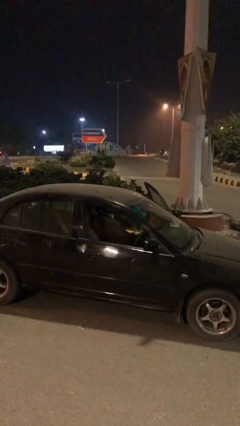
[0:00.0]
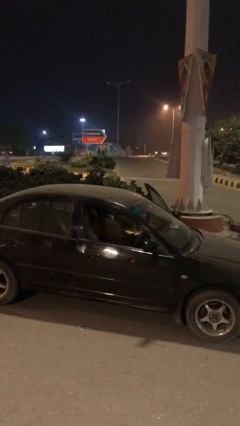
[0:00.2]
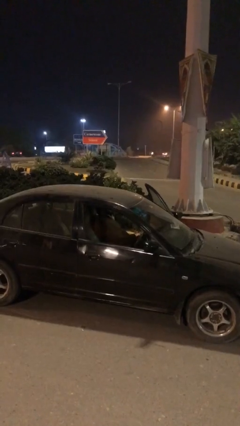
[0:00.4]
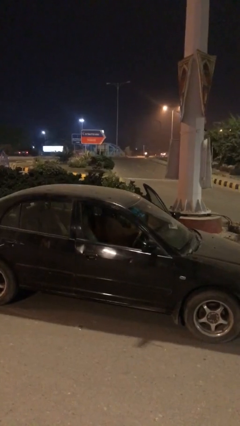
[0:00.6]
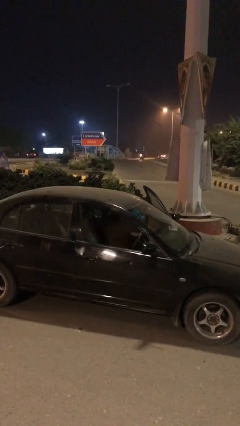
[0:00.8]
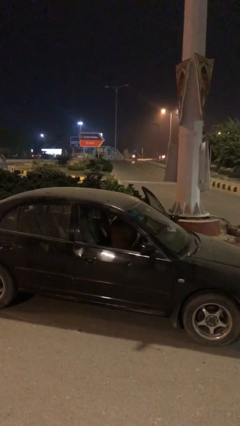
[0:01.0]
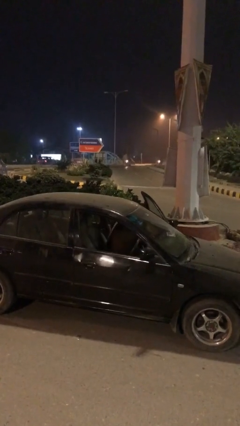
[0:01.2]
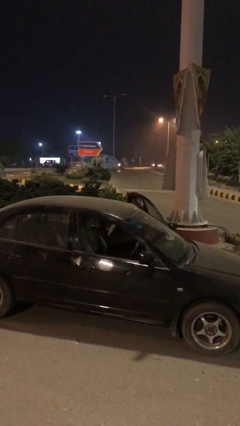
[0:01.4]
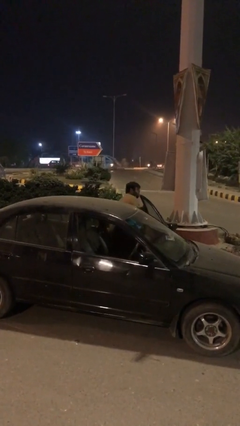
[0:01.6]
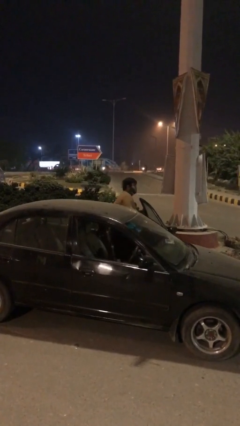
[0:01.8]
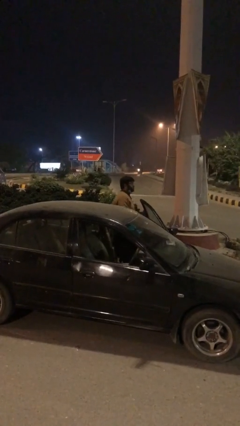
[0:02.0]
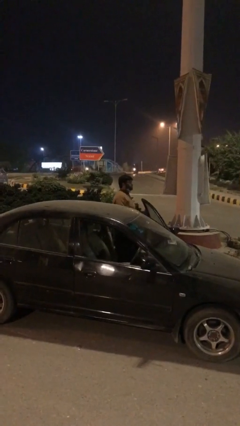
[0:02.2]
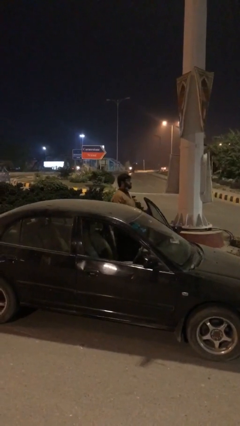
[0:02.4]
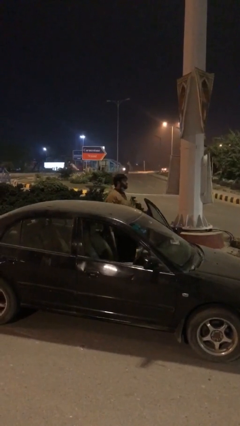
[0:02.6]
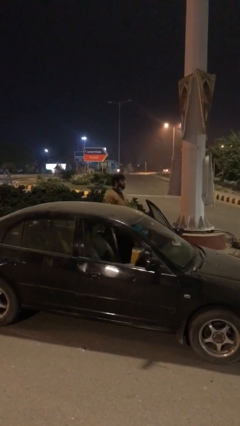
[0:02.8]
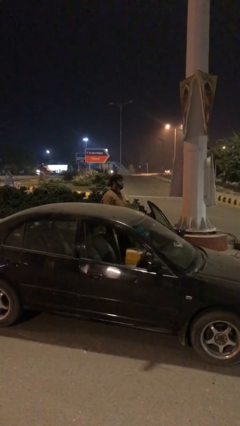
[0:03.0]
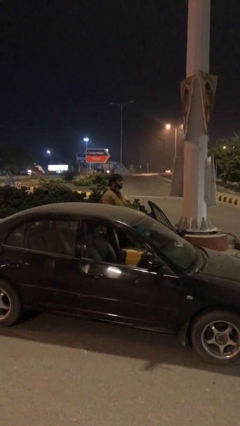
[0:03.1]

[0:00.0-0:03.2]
person exits car

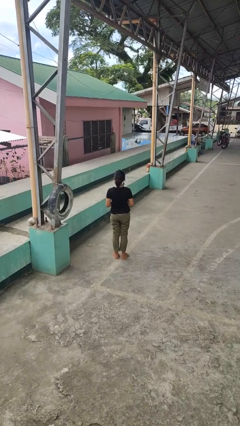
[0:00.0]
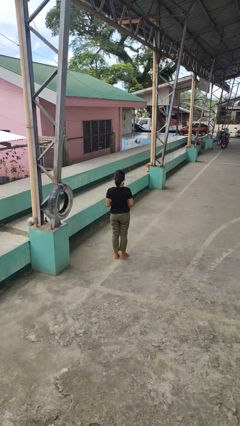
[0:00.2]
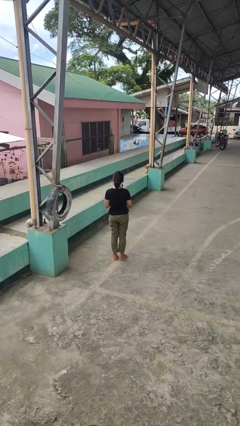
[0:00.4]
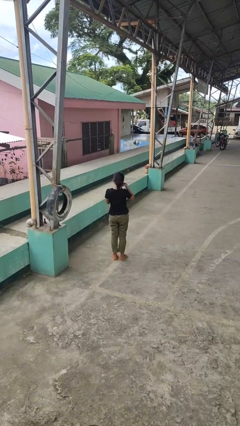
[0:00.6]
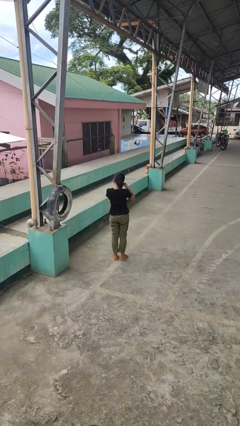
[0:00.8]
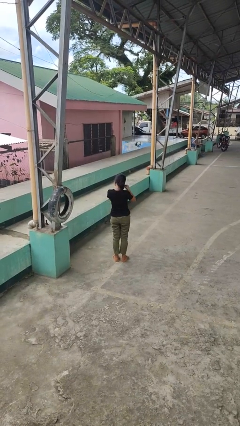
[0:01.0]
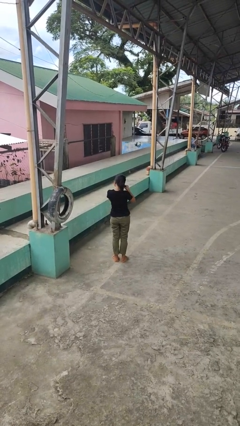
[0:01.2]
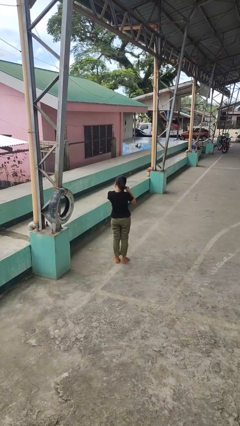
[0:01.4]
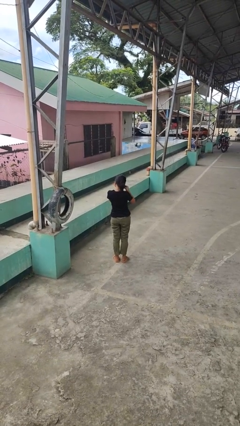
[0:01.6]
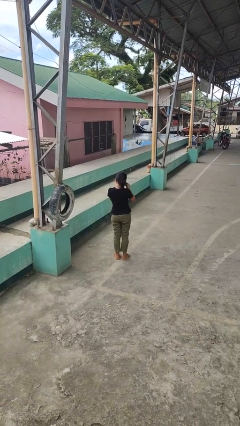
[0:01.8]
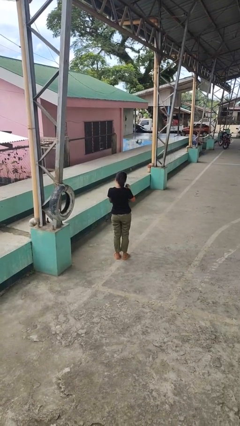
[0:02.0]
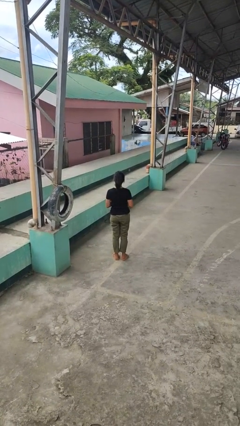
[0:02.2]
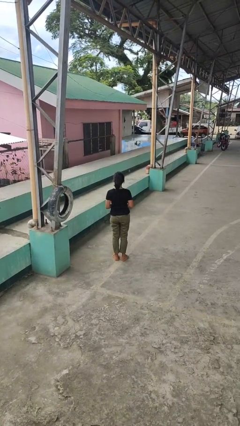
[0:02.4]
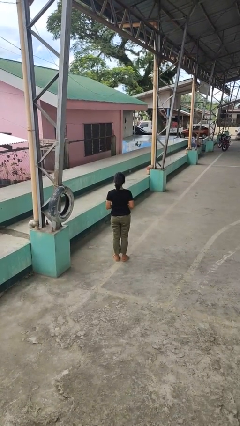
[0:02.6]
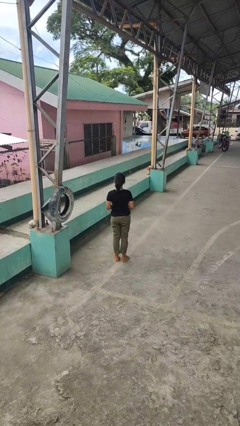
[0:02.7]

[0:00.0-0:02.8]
person takes off earrings

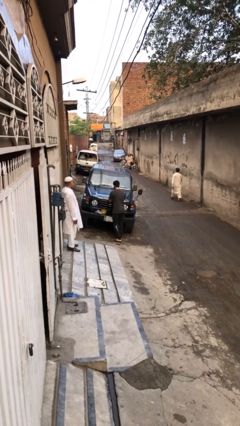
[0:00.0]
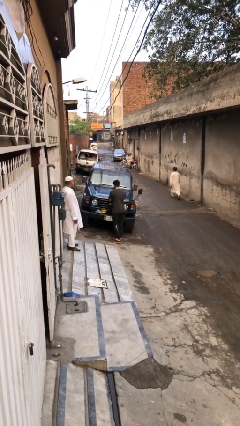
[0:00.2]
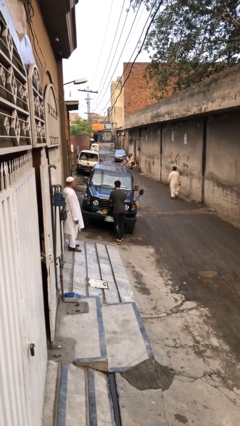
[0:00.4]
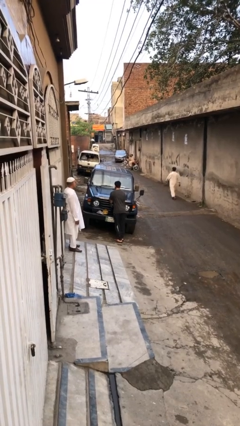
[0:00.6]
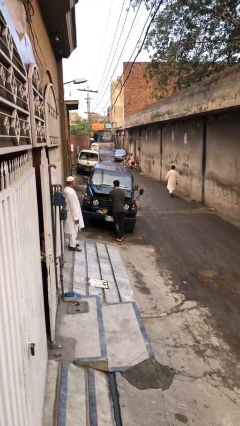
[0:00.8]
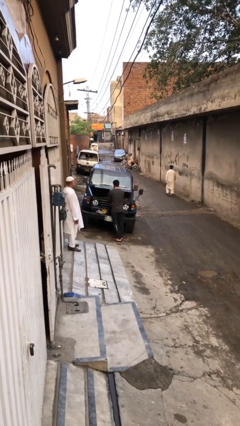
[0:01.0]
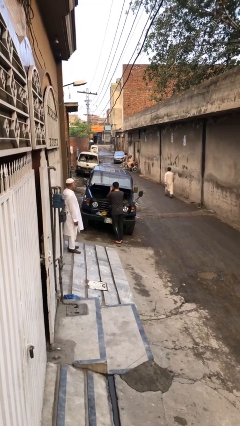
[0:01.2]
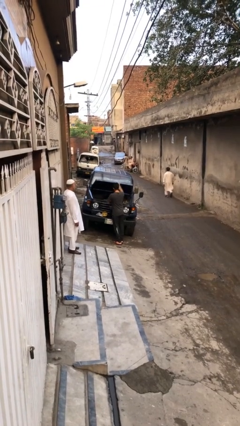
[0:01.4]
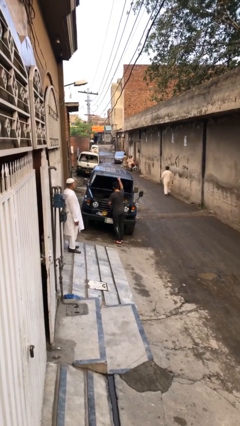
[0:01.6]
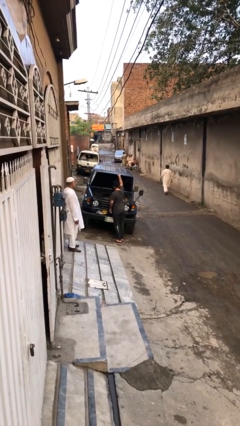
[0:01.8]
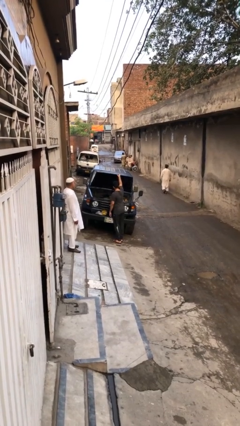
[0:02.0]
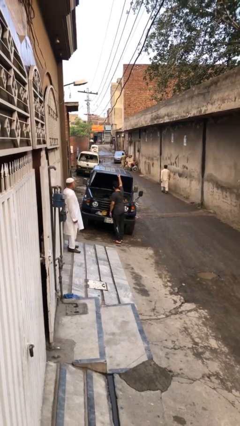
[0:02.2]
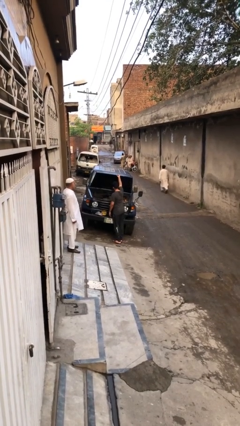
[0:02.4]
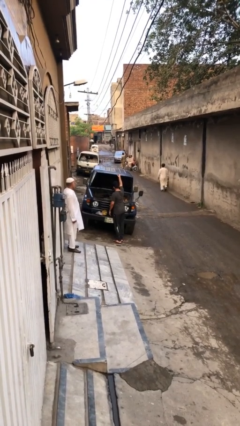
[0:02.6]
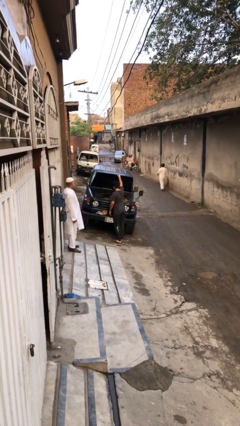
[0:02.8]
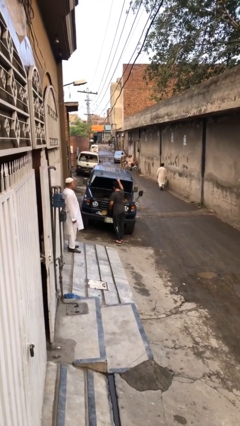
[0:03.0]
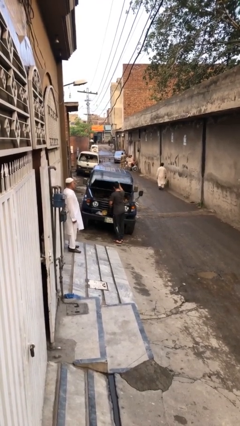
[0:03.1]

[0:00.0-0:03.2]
person opens car hood

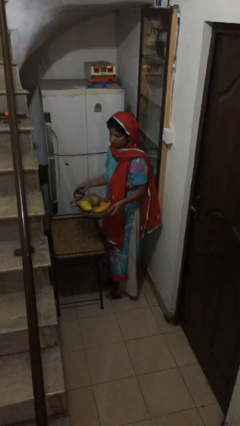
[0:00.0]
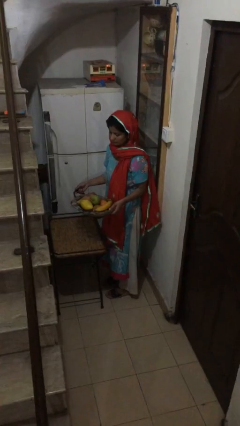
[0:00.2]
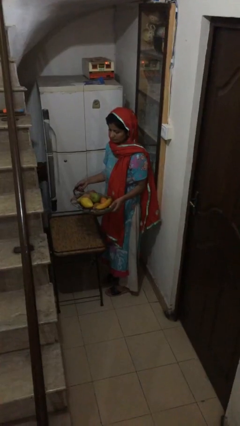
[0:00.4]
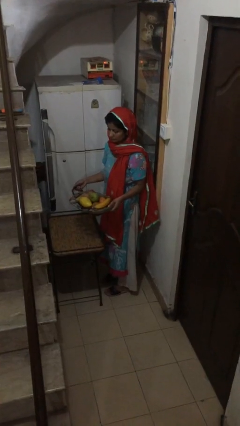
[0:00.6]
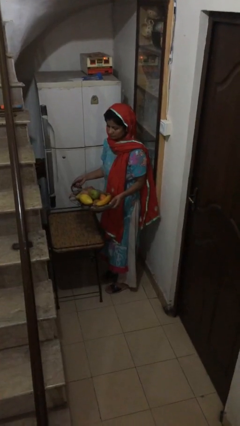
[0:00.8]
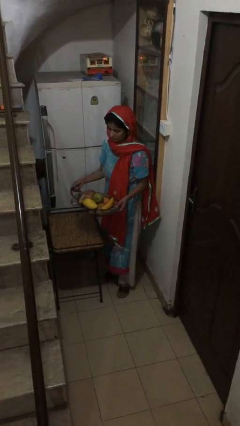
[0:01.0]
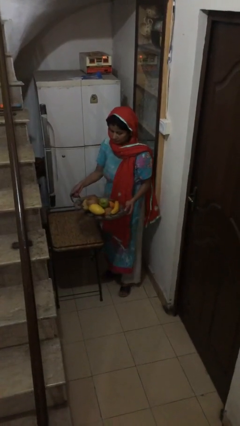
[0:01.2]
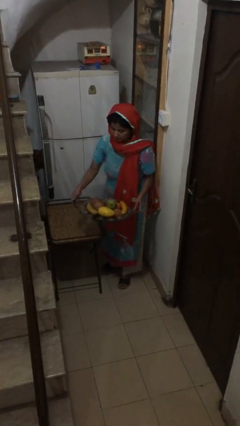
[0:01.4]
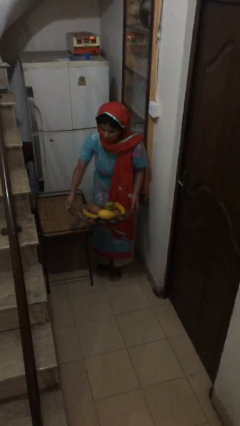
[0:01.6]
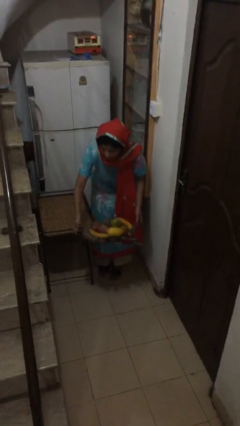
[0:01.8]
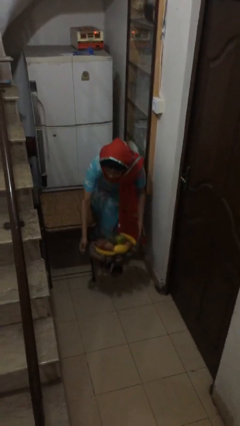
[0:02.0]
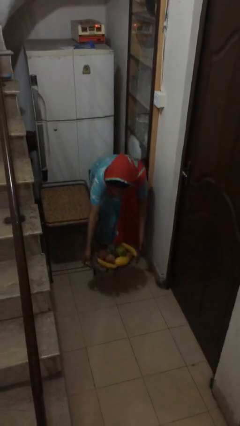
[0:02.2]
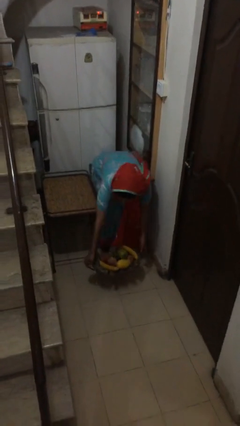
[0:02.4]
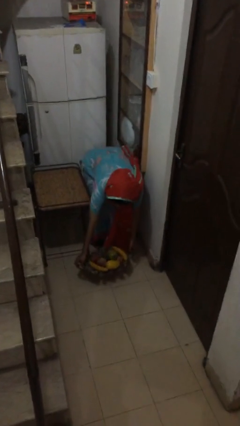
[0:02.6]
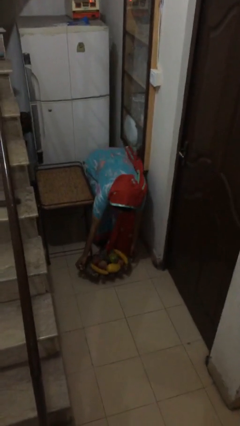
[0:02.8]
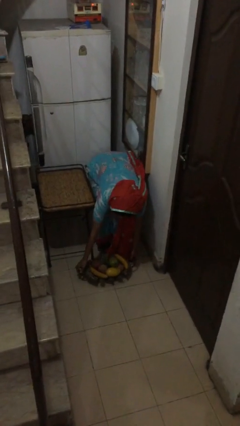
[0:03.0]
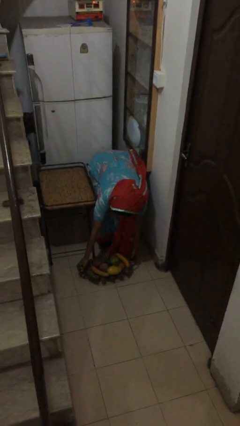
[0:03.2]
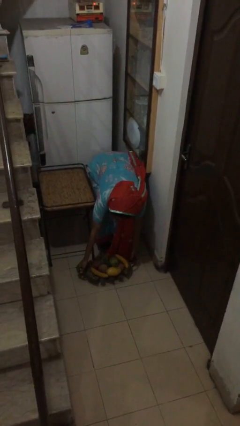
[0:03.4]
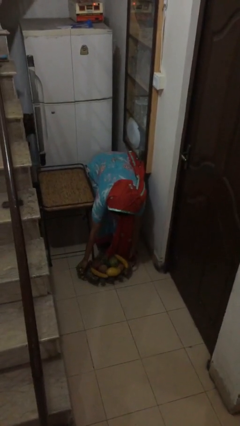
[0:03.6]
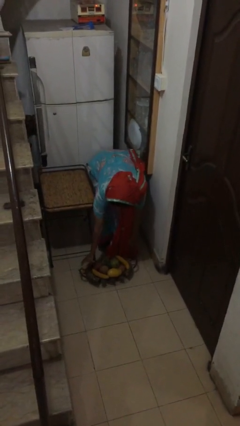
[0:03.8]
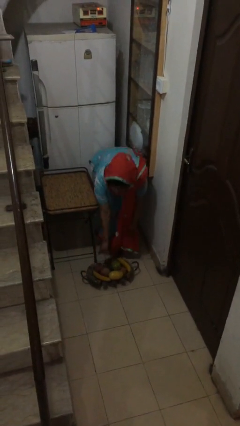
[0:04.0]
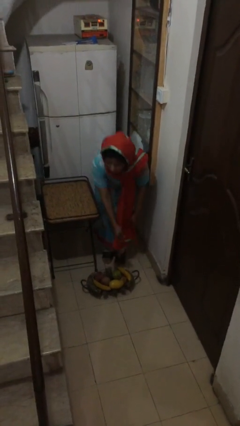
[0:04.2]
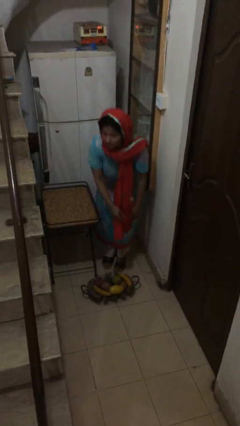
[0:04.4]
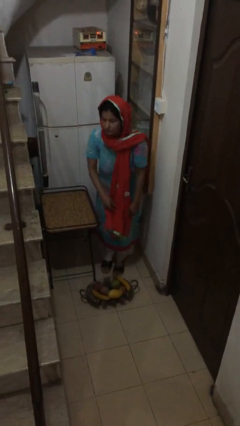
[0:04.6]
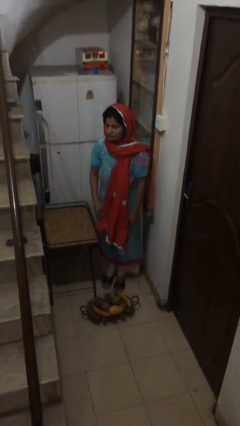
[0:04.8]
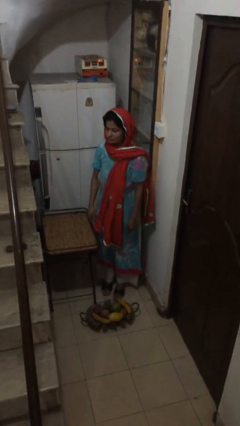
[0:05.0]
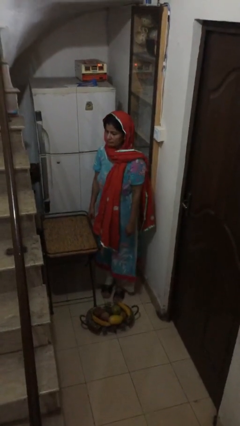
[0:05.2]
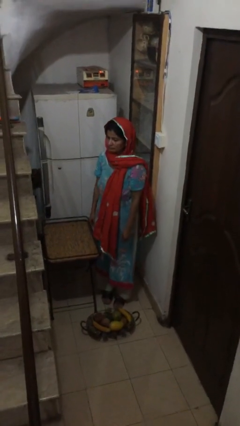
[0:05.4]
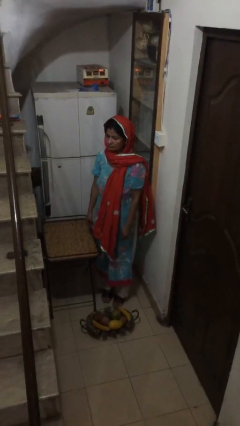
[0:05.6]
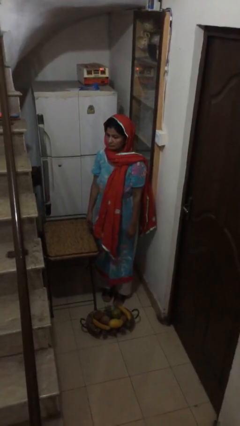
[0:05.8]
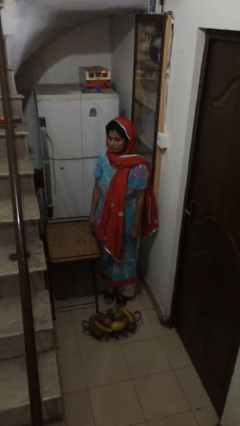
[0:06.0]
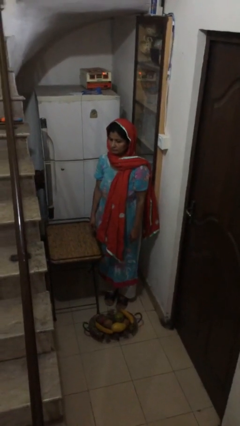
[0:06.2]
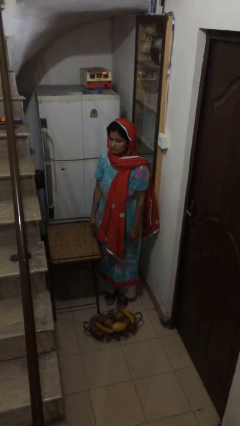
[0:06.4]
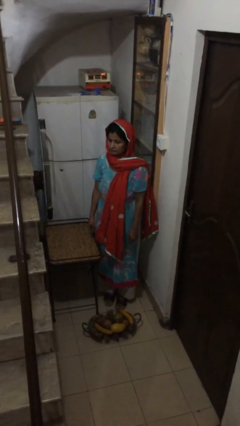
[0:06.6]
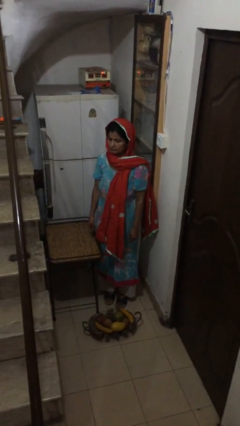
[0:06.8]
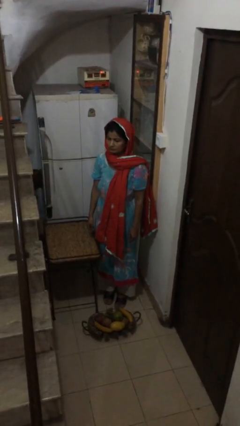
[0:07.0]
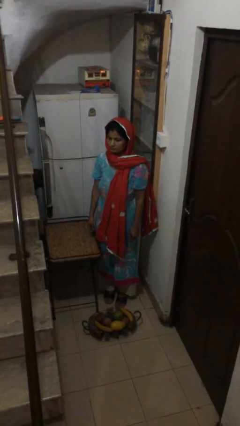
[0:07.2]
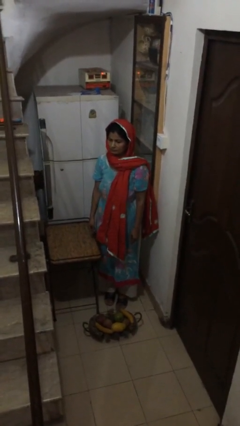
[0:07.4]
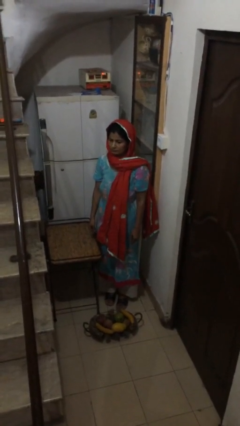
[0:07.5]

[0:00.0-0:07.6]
person puts down object on floor

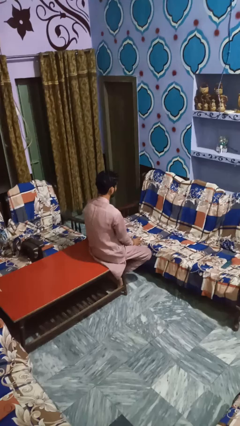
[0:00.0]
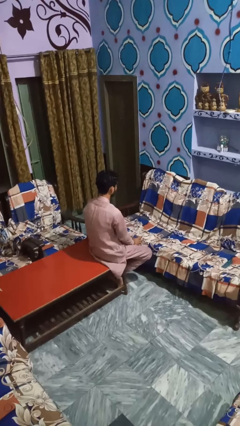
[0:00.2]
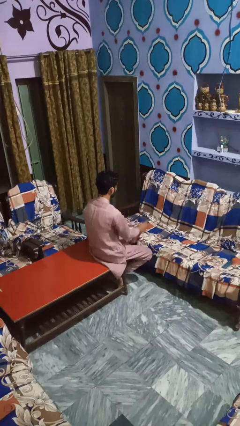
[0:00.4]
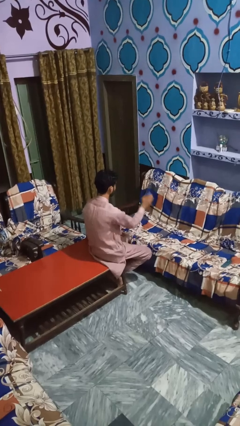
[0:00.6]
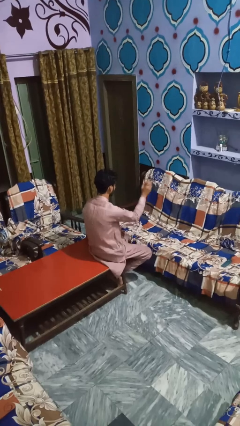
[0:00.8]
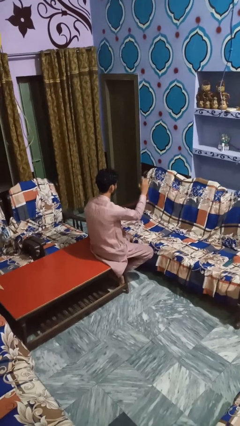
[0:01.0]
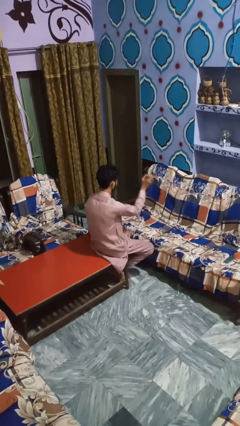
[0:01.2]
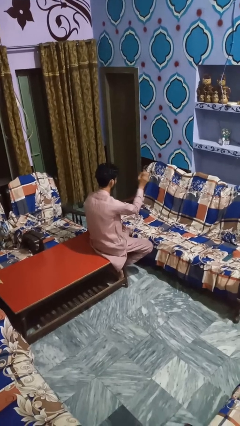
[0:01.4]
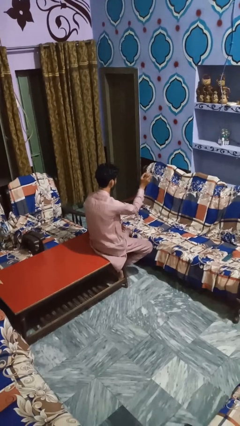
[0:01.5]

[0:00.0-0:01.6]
person sprays from bottle
